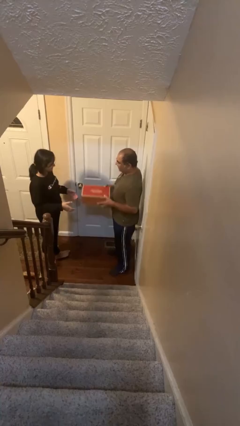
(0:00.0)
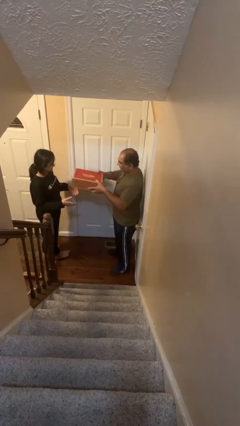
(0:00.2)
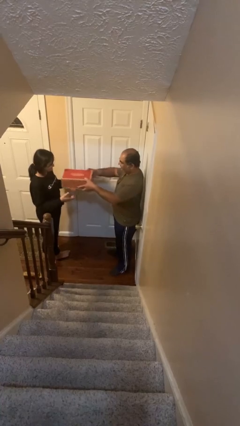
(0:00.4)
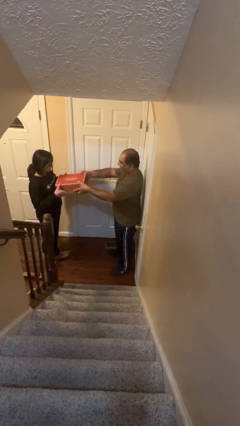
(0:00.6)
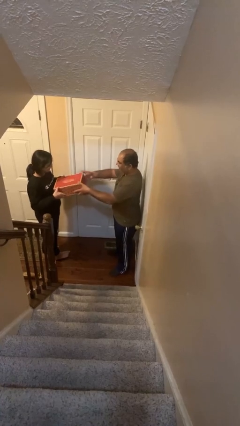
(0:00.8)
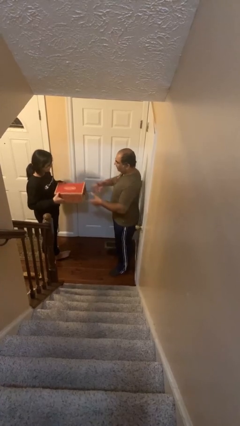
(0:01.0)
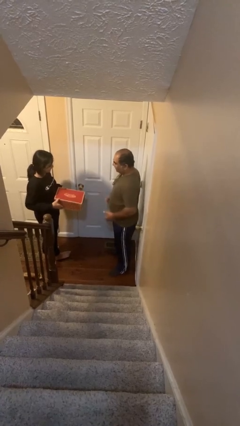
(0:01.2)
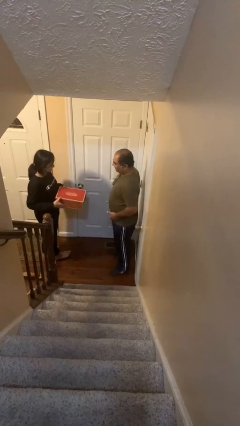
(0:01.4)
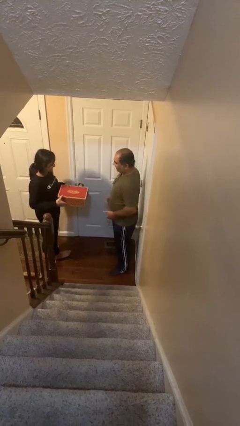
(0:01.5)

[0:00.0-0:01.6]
person transfers object to person

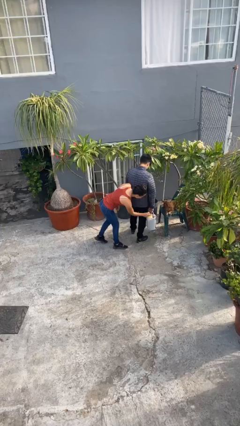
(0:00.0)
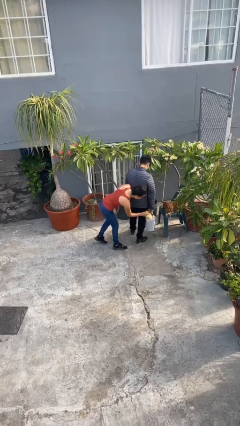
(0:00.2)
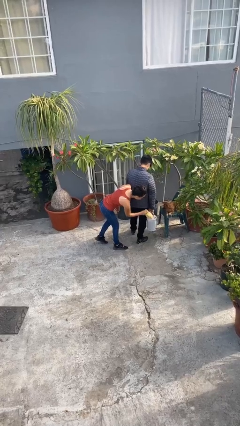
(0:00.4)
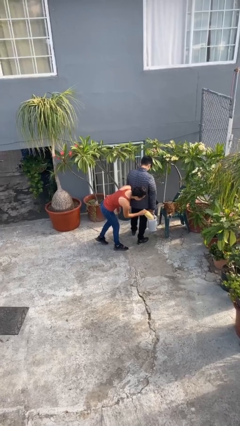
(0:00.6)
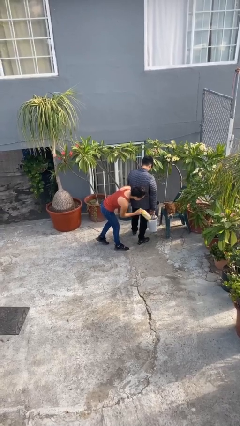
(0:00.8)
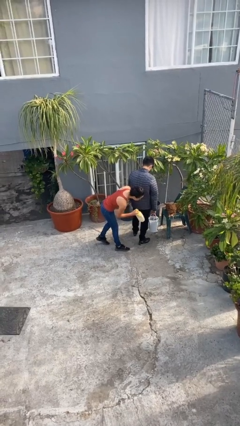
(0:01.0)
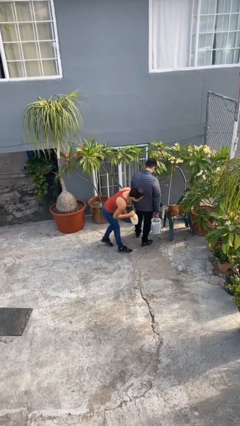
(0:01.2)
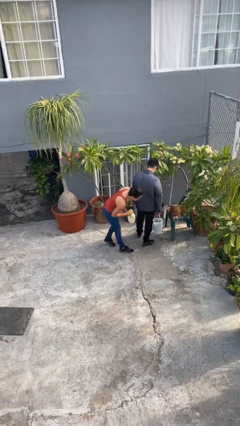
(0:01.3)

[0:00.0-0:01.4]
person steals object from person

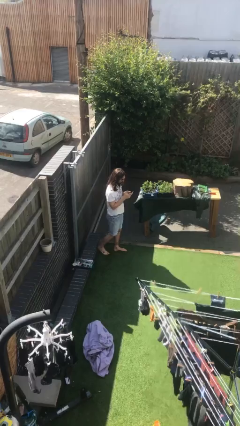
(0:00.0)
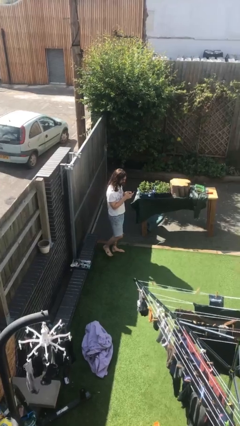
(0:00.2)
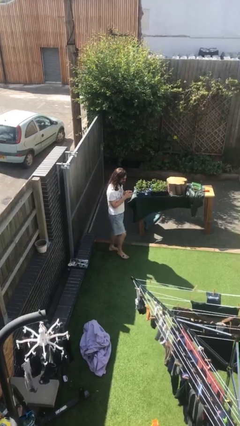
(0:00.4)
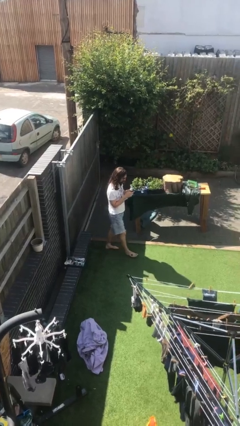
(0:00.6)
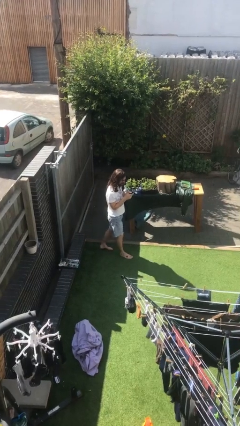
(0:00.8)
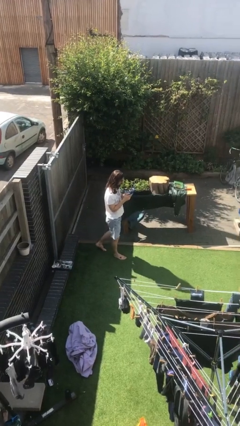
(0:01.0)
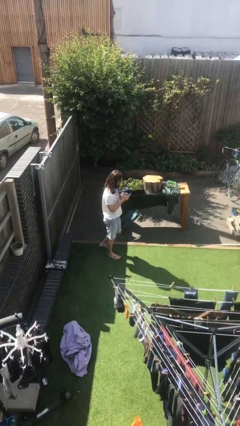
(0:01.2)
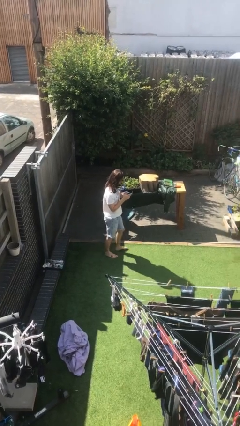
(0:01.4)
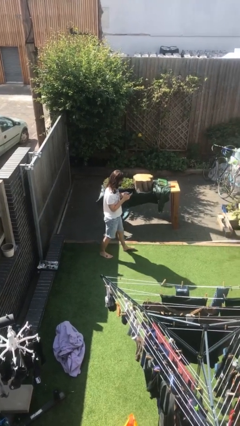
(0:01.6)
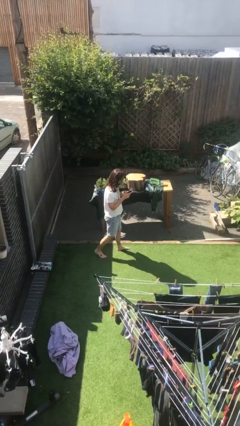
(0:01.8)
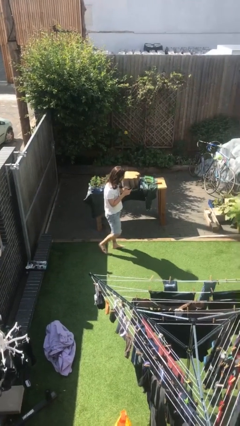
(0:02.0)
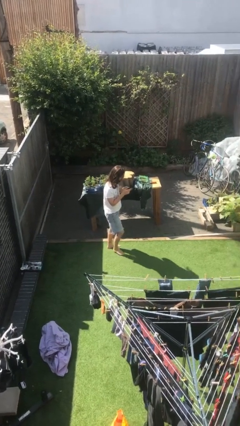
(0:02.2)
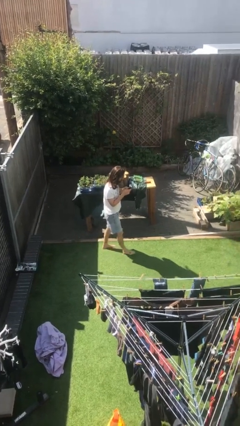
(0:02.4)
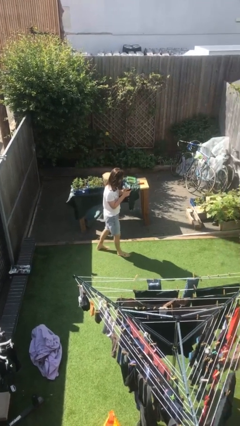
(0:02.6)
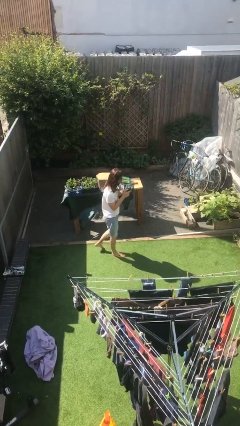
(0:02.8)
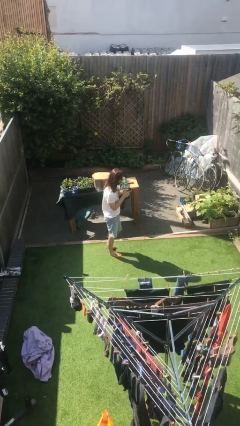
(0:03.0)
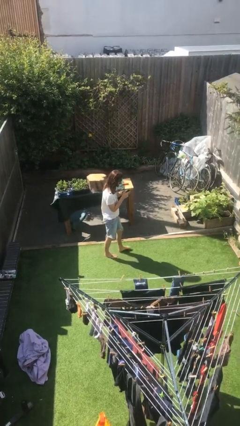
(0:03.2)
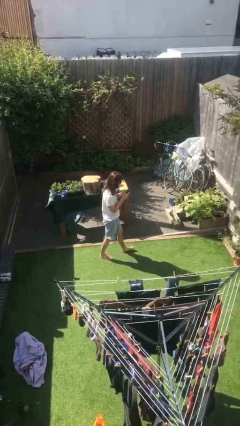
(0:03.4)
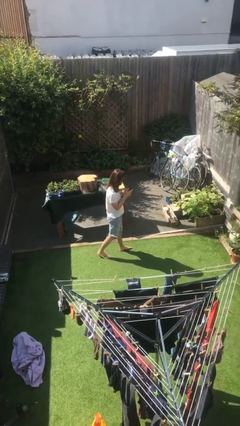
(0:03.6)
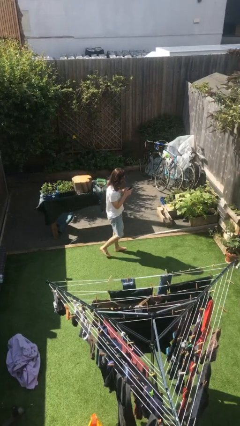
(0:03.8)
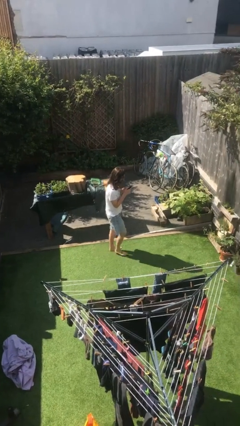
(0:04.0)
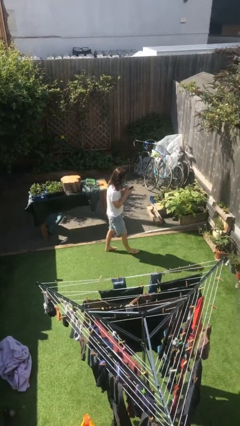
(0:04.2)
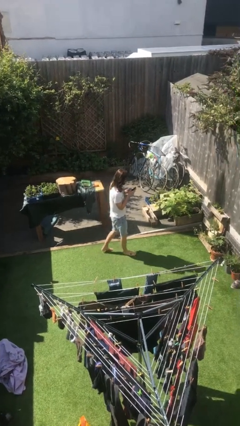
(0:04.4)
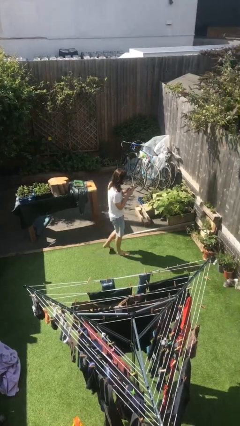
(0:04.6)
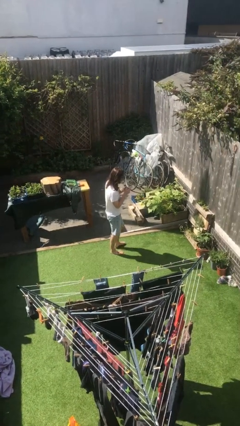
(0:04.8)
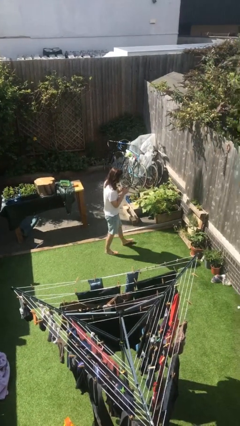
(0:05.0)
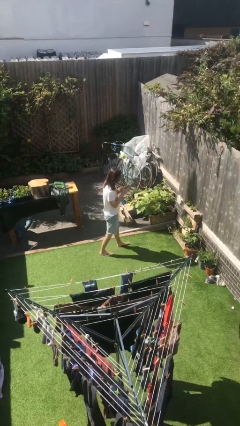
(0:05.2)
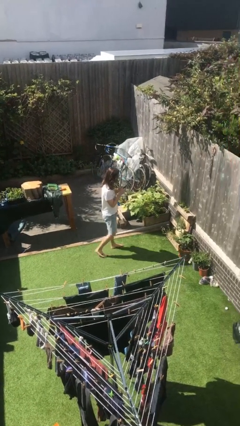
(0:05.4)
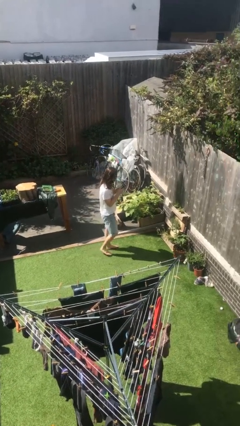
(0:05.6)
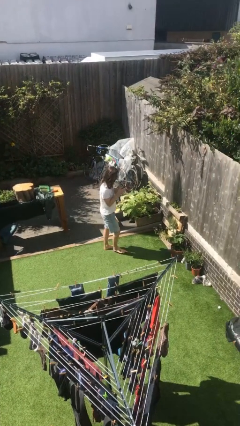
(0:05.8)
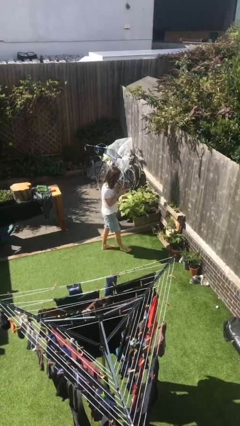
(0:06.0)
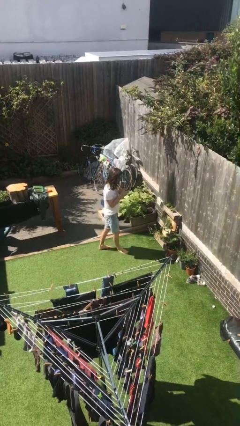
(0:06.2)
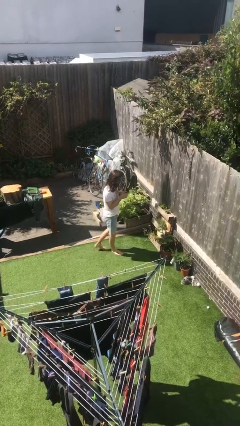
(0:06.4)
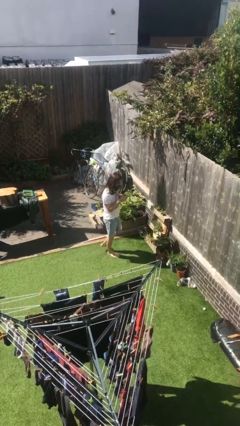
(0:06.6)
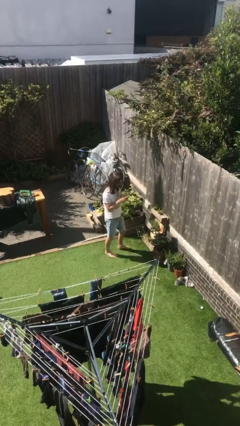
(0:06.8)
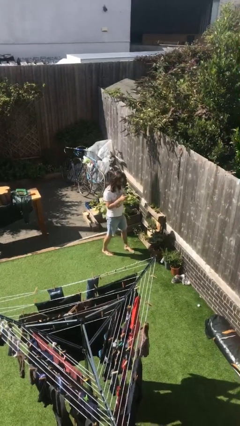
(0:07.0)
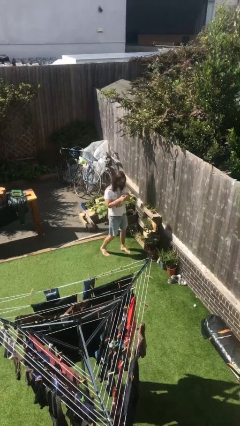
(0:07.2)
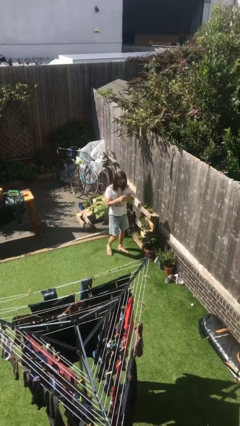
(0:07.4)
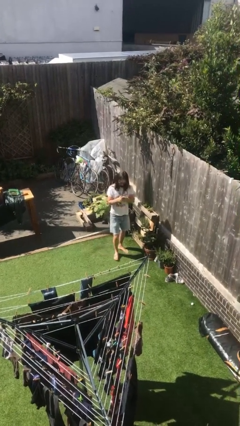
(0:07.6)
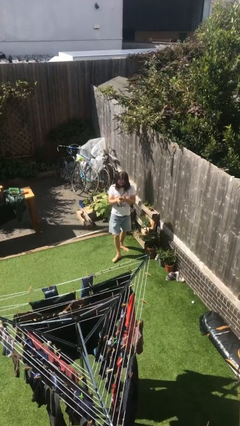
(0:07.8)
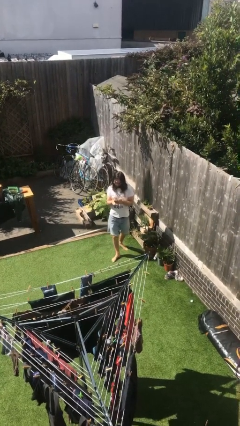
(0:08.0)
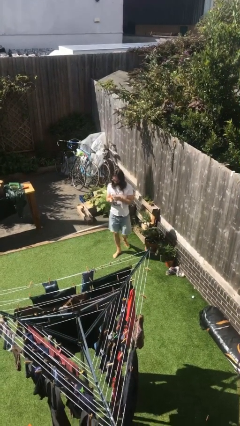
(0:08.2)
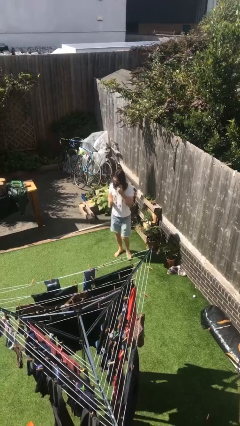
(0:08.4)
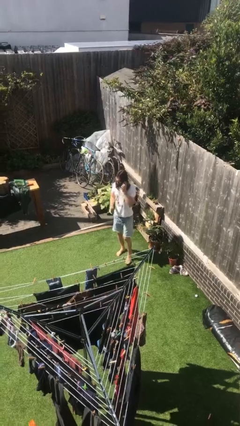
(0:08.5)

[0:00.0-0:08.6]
person texts on phone

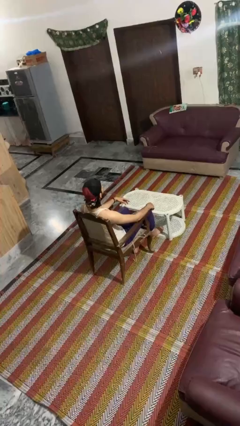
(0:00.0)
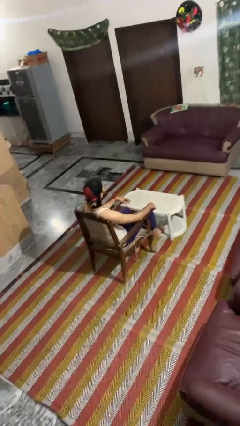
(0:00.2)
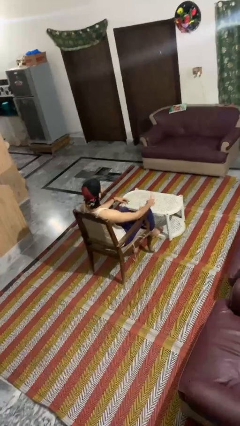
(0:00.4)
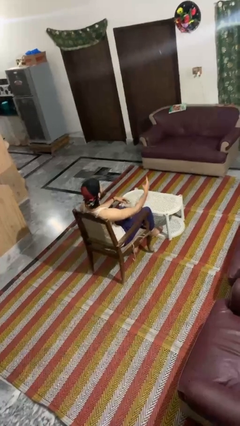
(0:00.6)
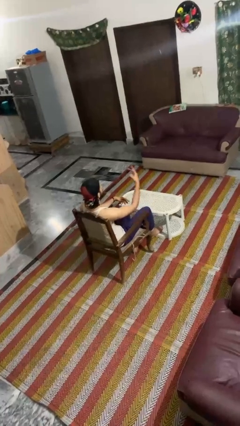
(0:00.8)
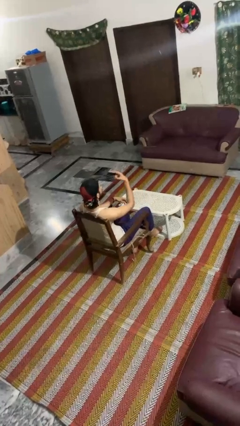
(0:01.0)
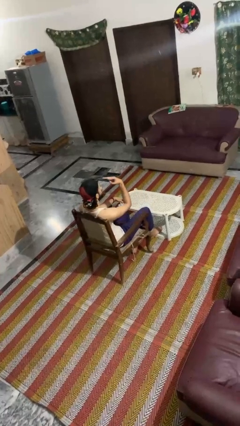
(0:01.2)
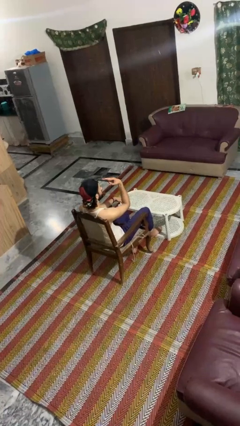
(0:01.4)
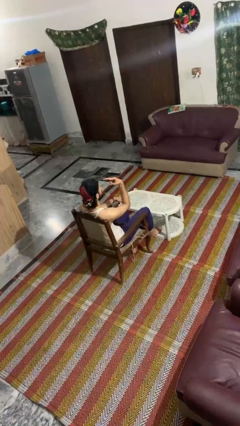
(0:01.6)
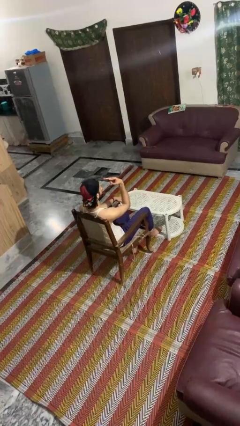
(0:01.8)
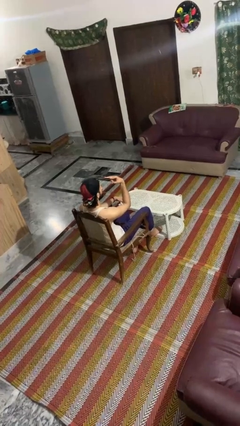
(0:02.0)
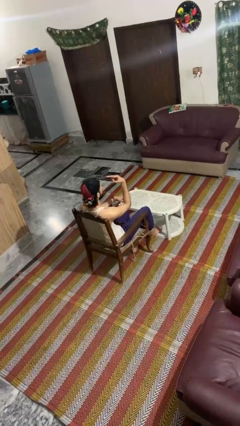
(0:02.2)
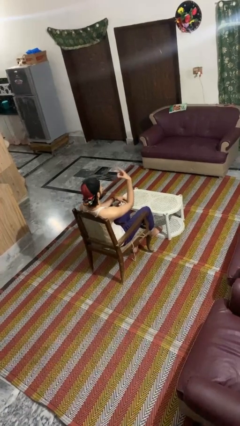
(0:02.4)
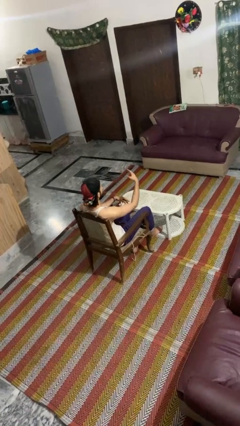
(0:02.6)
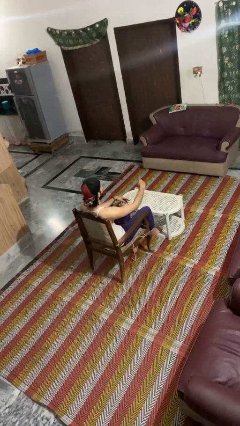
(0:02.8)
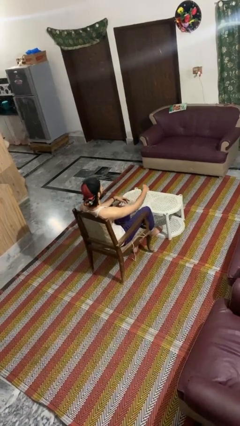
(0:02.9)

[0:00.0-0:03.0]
person gestures watch closely

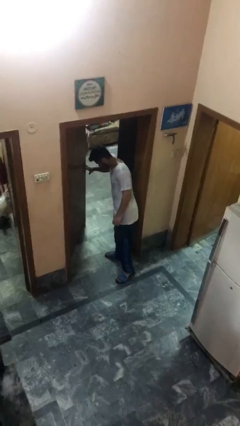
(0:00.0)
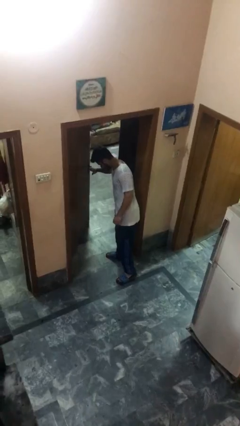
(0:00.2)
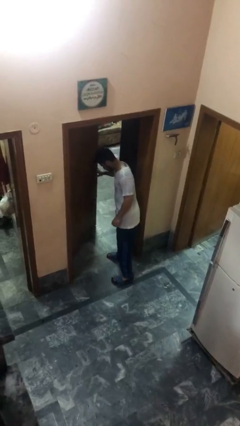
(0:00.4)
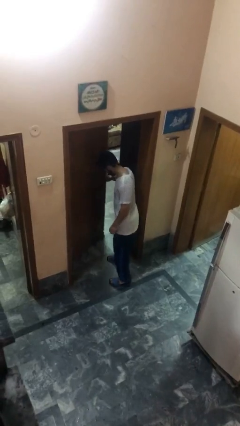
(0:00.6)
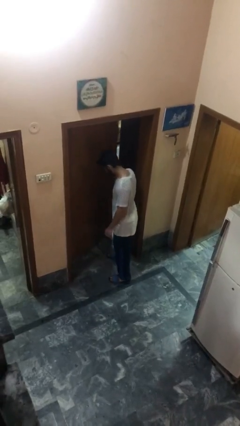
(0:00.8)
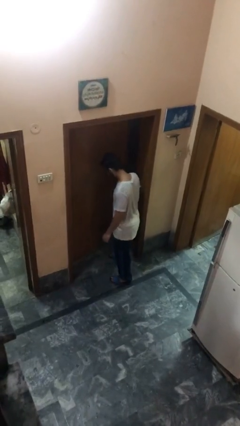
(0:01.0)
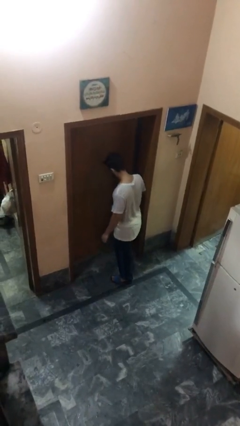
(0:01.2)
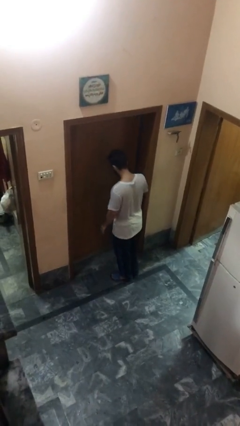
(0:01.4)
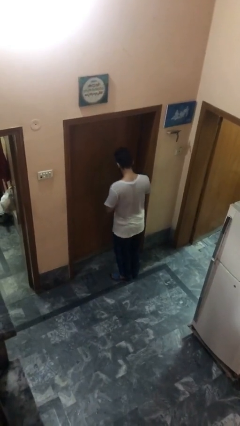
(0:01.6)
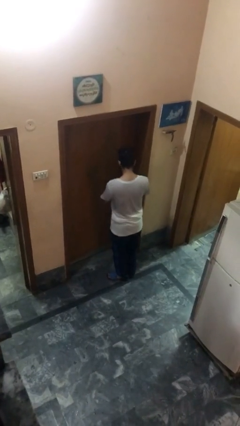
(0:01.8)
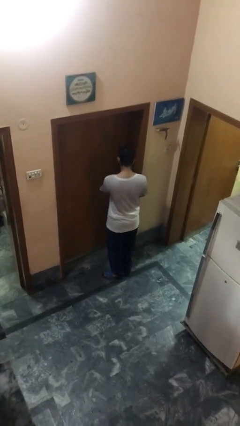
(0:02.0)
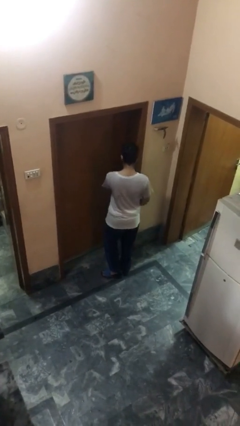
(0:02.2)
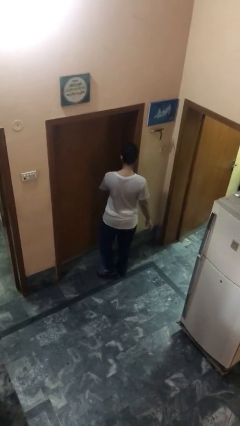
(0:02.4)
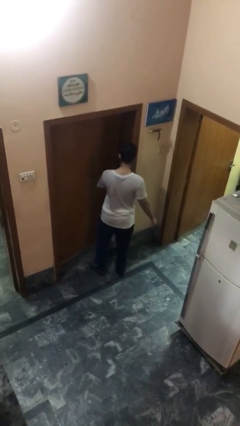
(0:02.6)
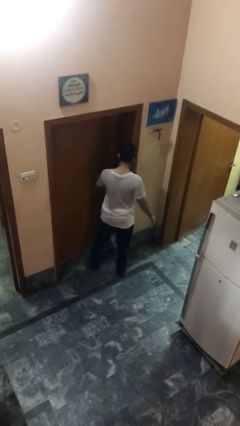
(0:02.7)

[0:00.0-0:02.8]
person closes facility door

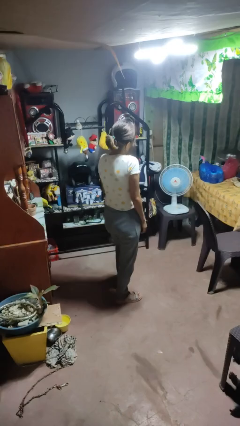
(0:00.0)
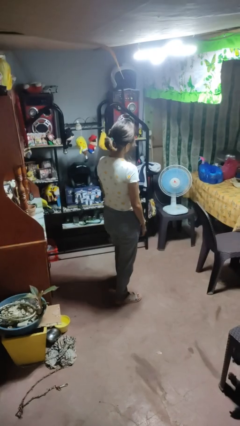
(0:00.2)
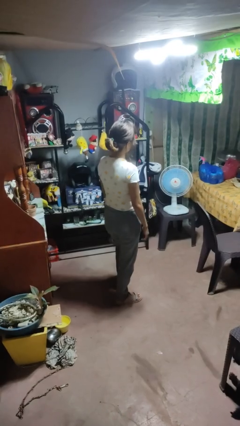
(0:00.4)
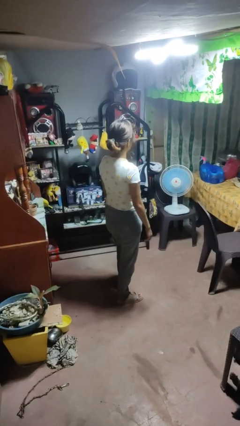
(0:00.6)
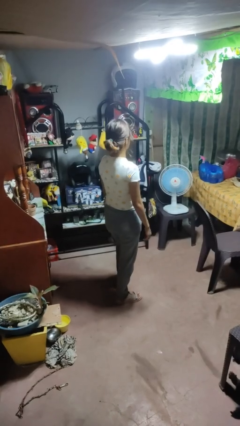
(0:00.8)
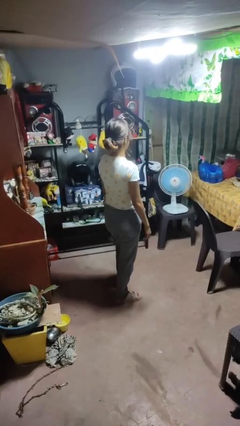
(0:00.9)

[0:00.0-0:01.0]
person shrugs
